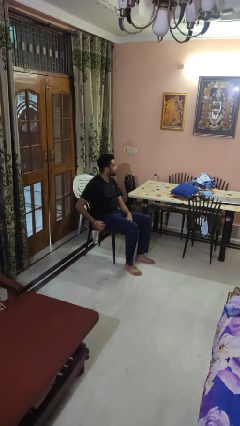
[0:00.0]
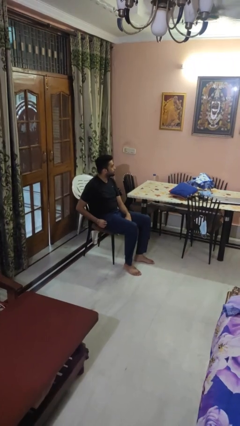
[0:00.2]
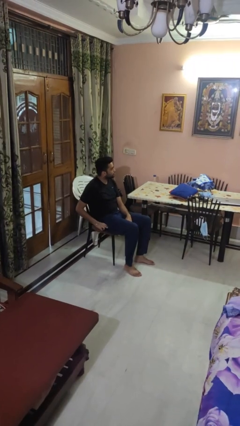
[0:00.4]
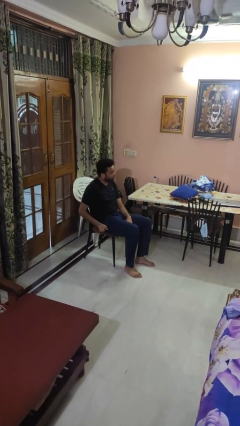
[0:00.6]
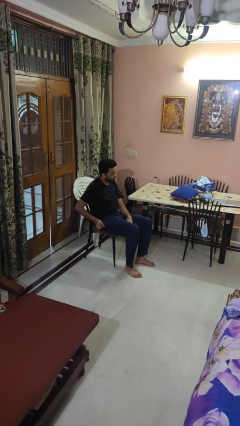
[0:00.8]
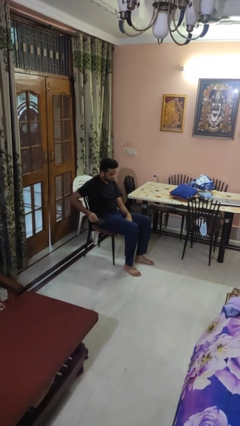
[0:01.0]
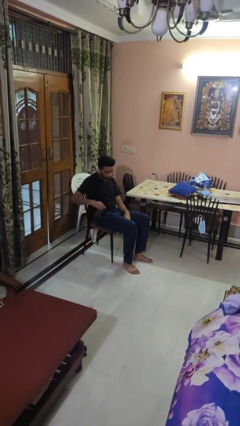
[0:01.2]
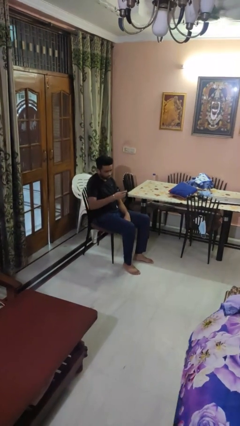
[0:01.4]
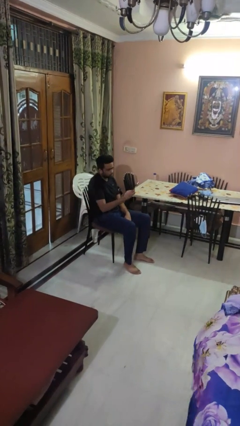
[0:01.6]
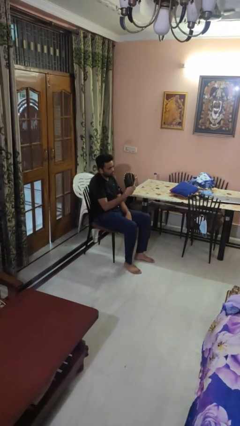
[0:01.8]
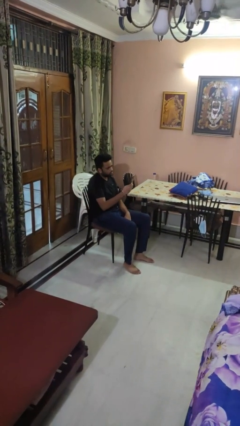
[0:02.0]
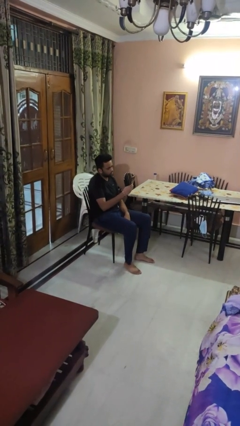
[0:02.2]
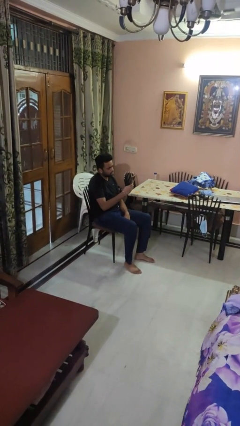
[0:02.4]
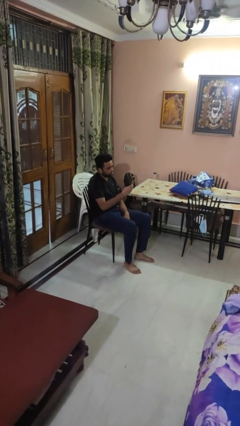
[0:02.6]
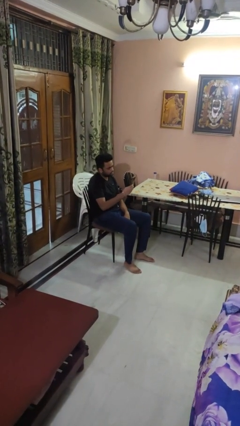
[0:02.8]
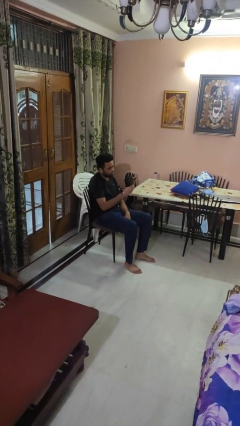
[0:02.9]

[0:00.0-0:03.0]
person takes phone from pocket

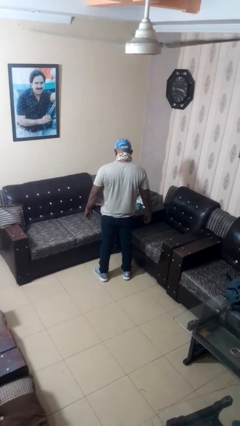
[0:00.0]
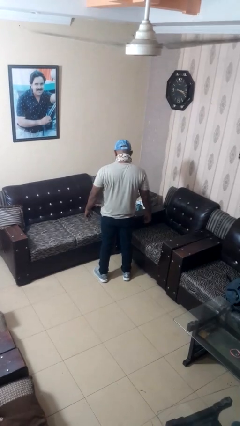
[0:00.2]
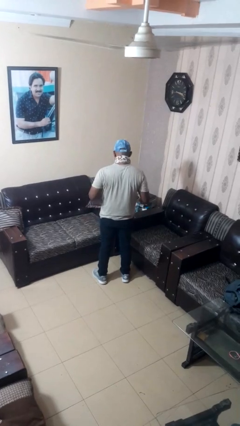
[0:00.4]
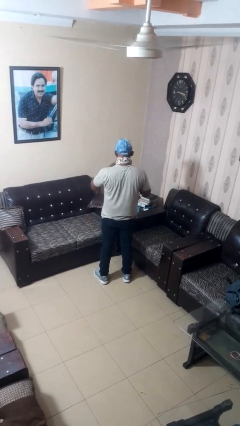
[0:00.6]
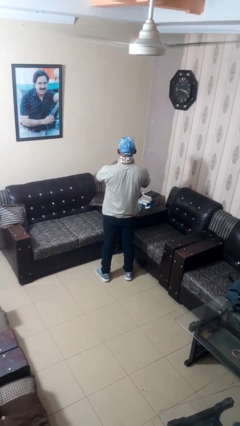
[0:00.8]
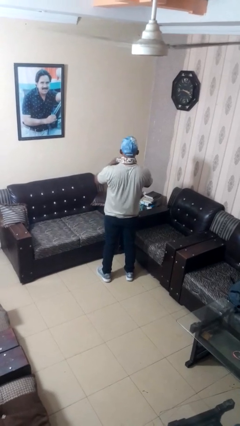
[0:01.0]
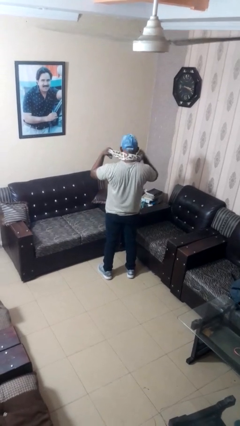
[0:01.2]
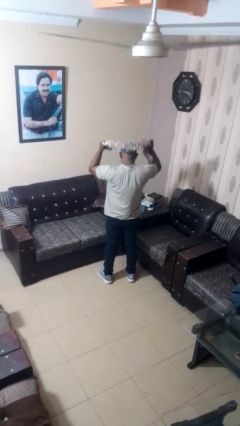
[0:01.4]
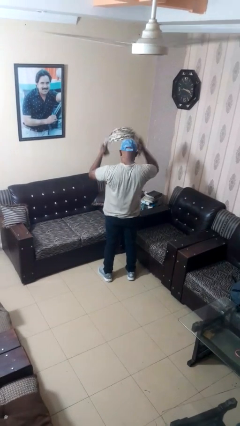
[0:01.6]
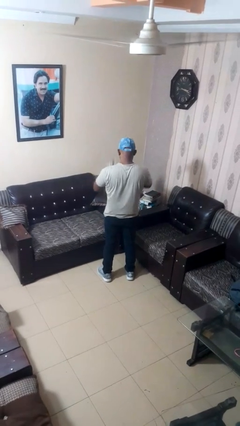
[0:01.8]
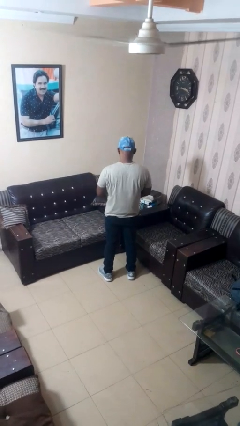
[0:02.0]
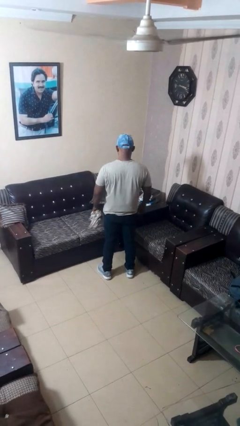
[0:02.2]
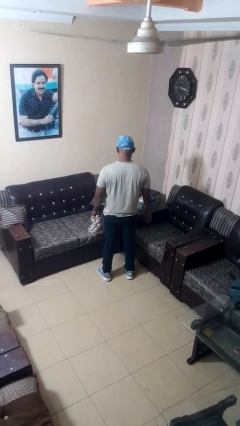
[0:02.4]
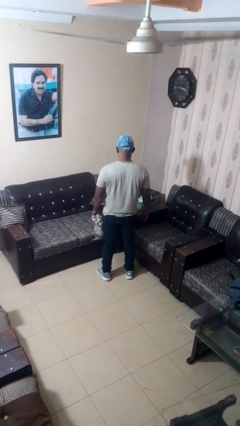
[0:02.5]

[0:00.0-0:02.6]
person takes off scarf

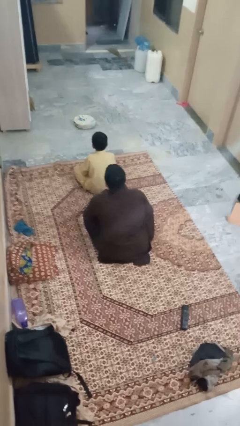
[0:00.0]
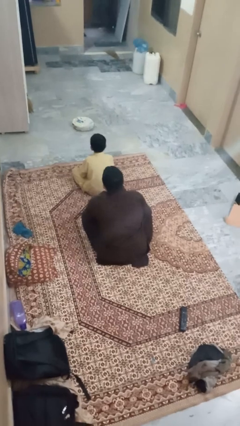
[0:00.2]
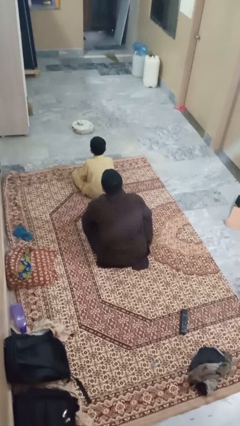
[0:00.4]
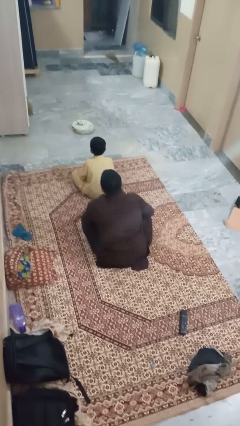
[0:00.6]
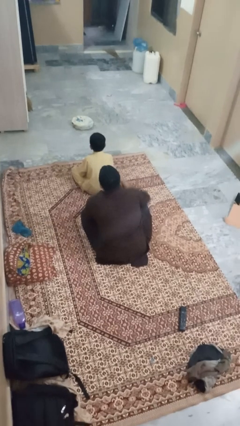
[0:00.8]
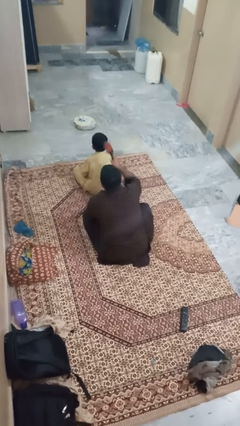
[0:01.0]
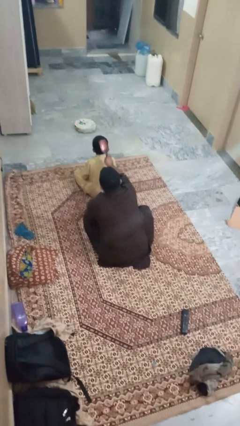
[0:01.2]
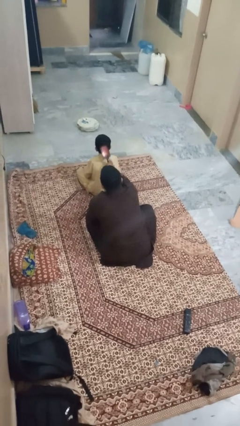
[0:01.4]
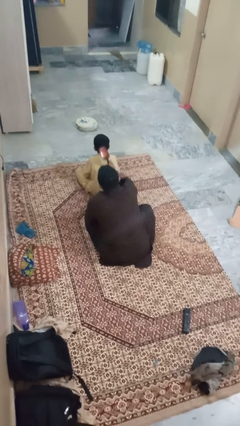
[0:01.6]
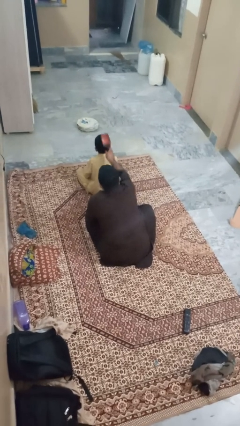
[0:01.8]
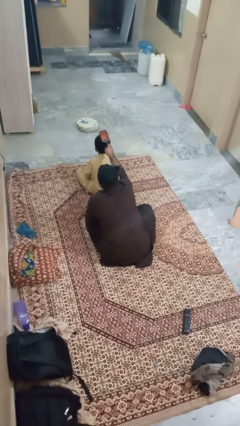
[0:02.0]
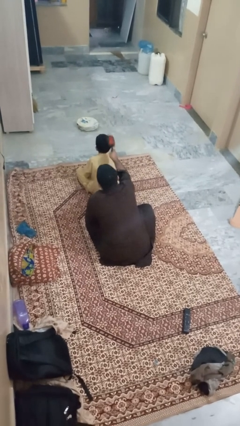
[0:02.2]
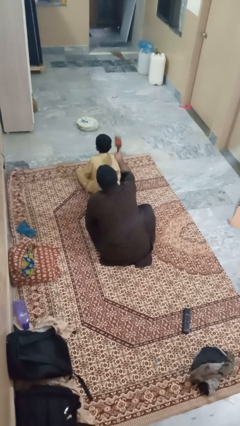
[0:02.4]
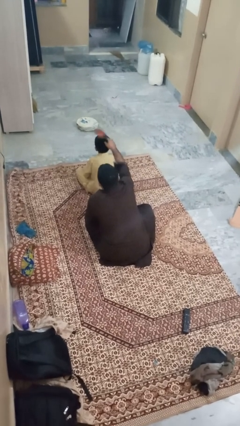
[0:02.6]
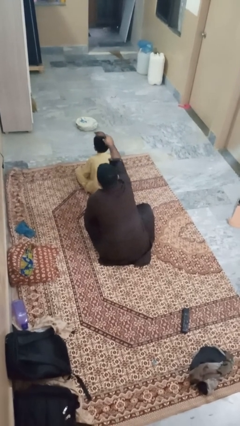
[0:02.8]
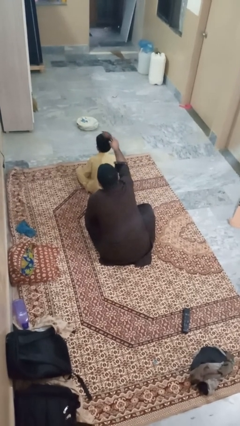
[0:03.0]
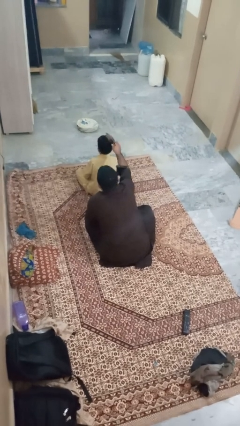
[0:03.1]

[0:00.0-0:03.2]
person brushes hair of person

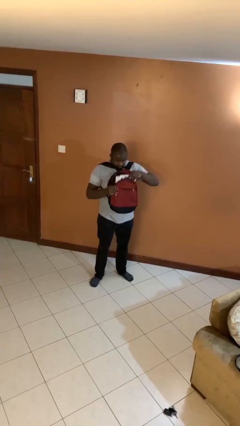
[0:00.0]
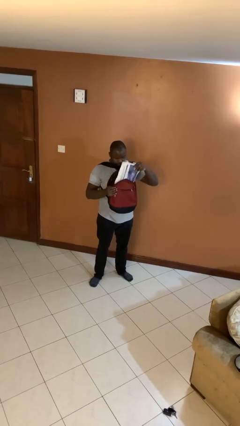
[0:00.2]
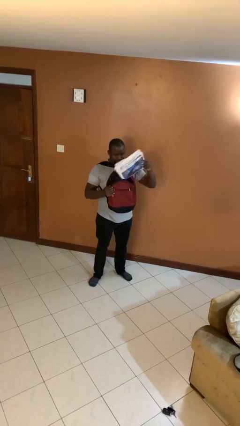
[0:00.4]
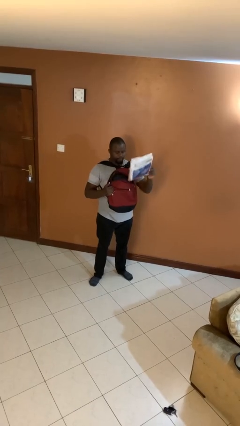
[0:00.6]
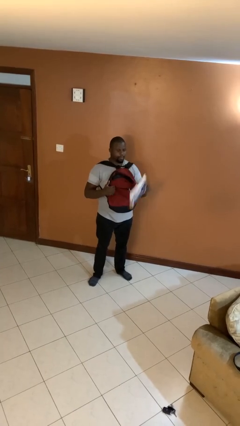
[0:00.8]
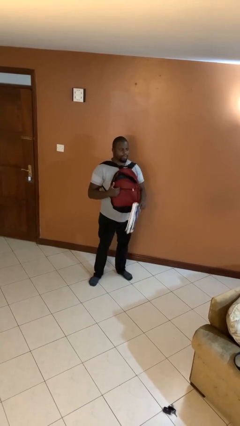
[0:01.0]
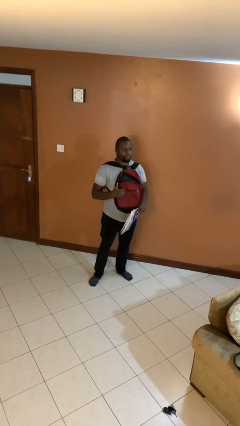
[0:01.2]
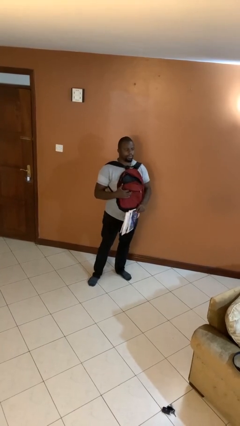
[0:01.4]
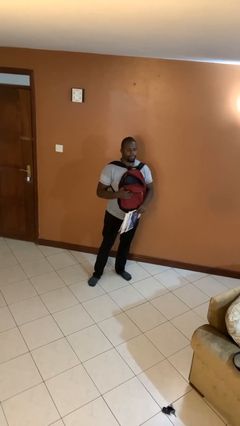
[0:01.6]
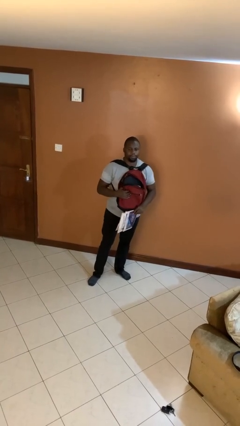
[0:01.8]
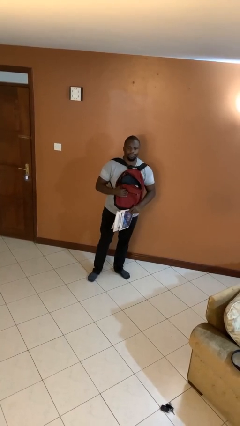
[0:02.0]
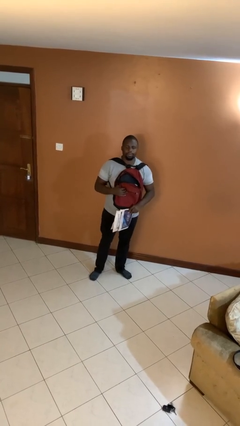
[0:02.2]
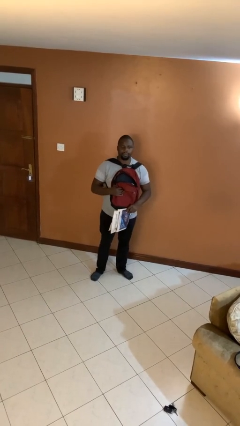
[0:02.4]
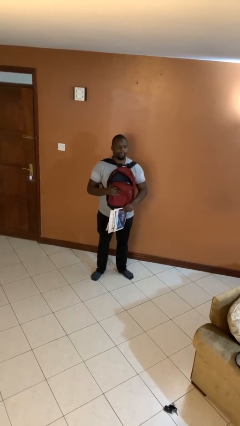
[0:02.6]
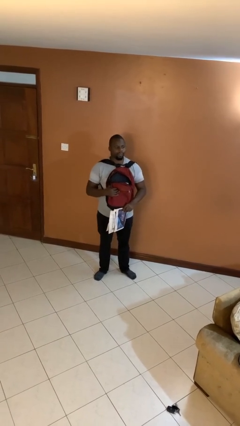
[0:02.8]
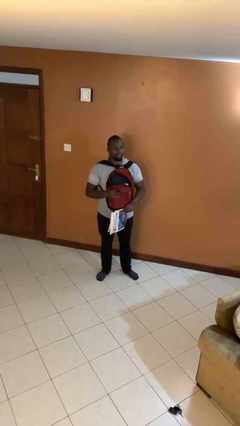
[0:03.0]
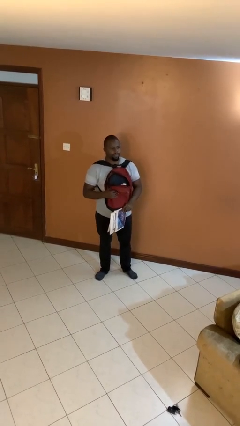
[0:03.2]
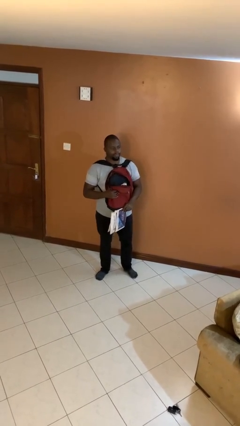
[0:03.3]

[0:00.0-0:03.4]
person takes object from backpack

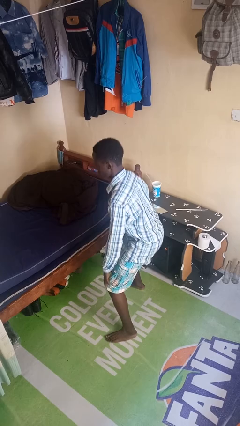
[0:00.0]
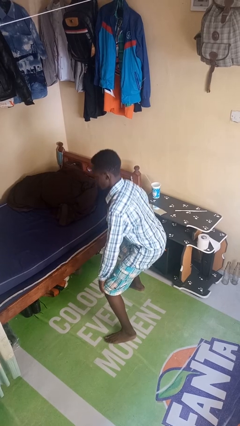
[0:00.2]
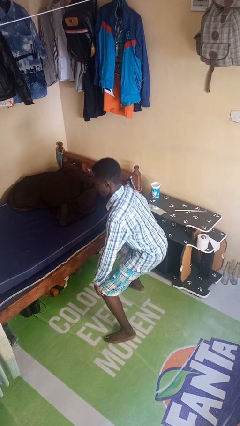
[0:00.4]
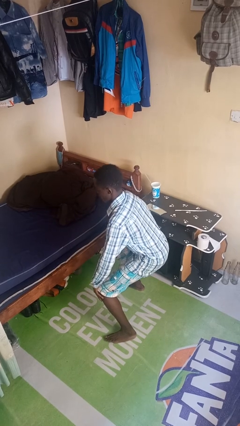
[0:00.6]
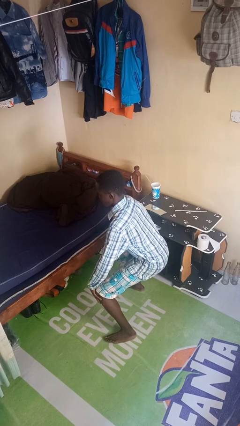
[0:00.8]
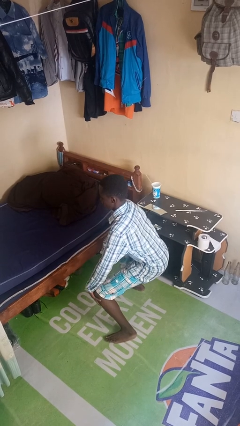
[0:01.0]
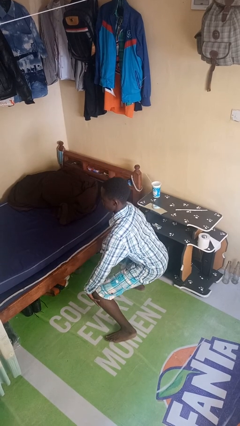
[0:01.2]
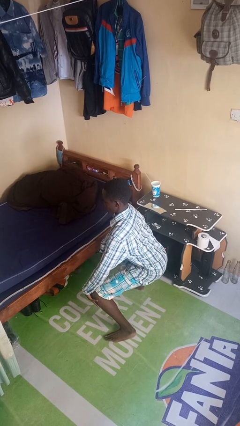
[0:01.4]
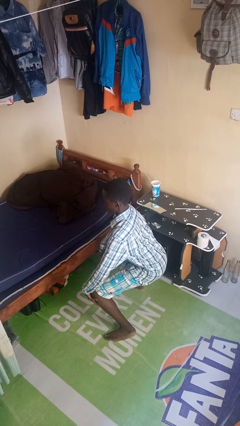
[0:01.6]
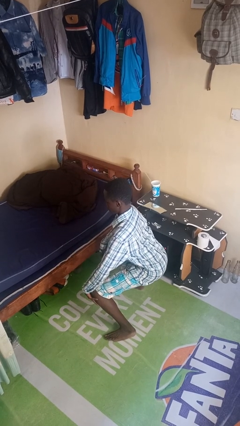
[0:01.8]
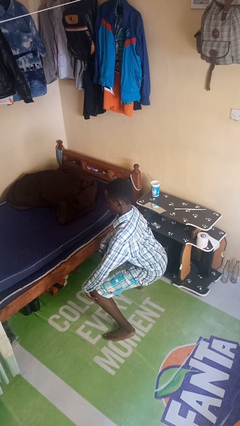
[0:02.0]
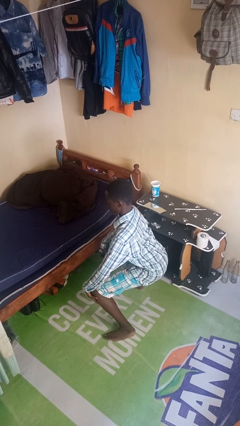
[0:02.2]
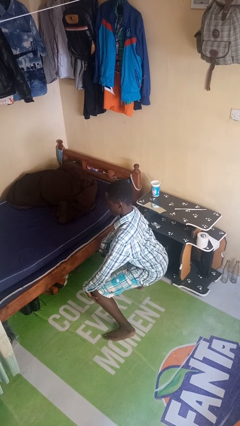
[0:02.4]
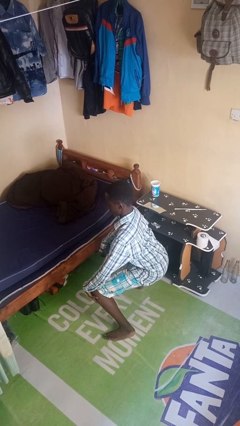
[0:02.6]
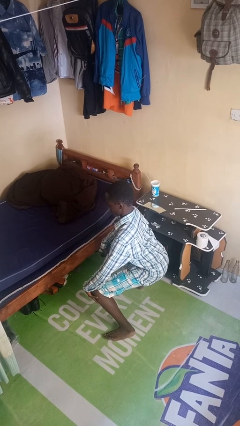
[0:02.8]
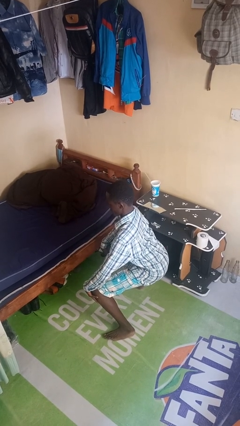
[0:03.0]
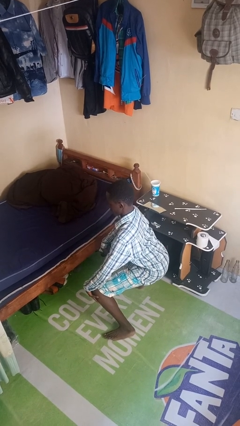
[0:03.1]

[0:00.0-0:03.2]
person squats

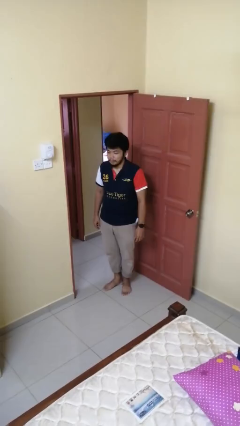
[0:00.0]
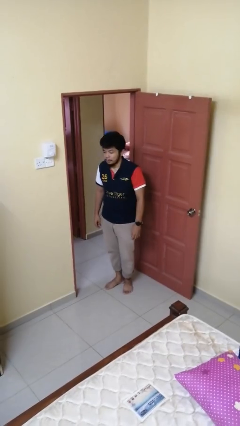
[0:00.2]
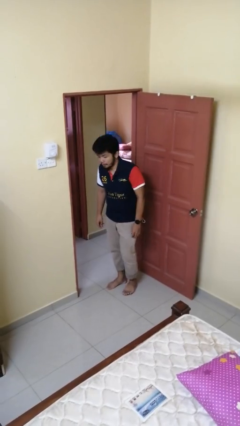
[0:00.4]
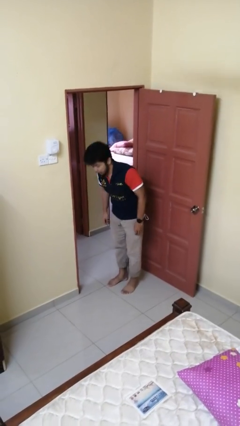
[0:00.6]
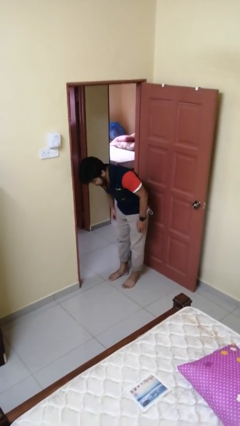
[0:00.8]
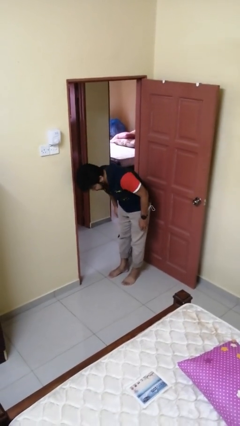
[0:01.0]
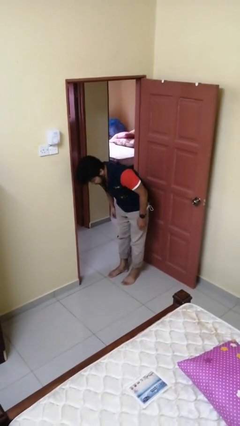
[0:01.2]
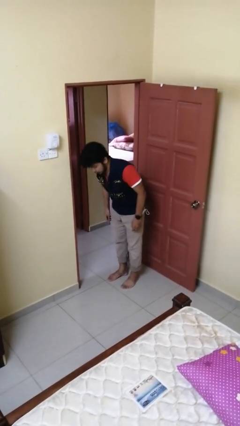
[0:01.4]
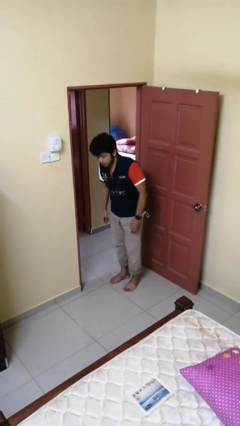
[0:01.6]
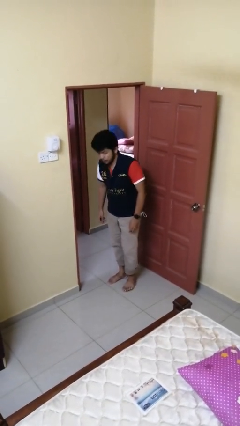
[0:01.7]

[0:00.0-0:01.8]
person bows

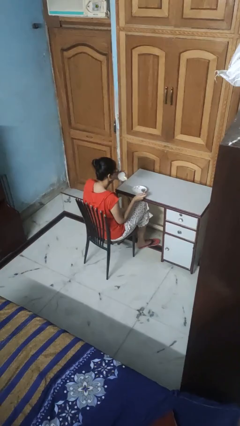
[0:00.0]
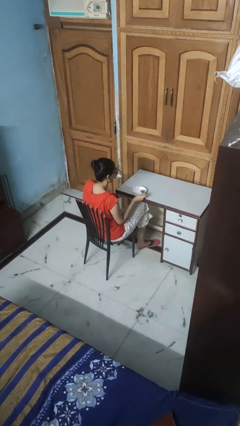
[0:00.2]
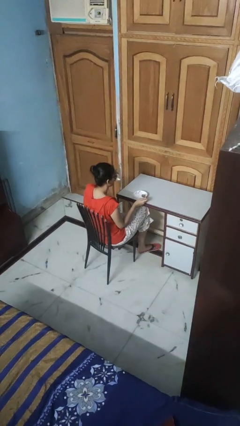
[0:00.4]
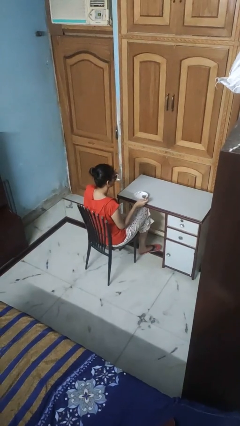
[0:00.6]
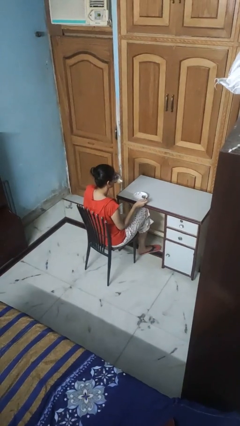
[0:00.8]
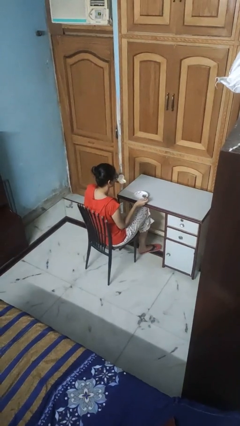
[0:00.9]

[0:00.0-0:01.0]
person drinks from mug
